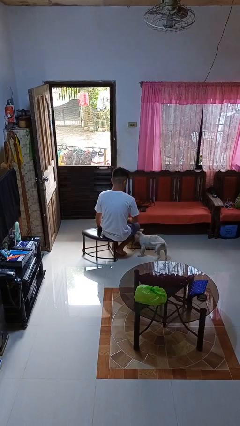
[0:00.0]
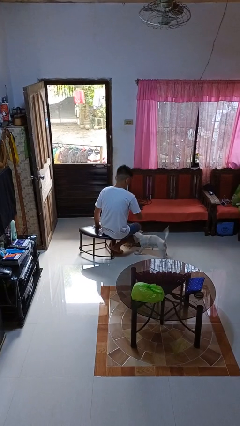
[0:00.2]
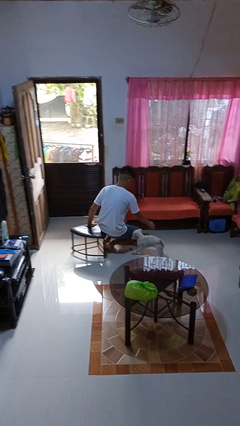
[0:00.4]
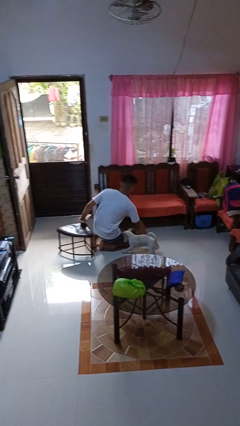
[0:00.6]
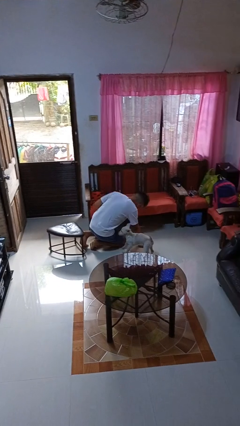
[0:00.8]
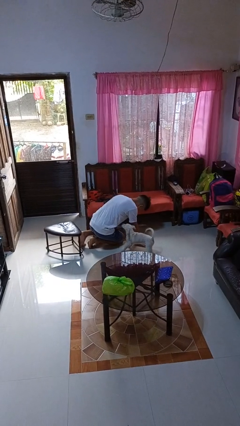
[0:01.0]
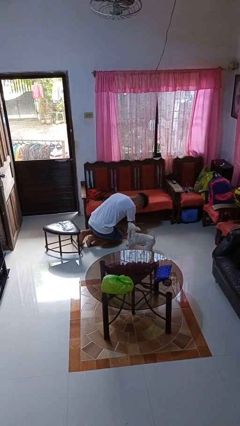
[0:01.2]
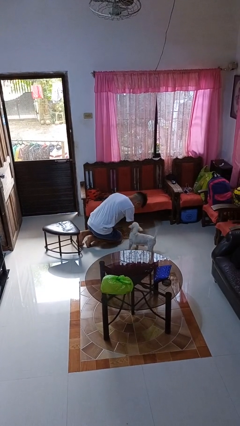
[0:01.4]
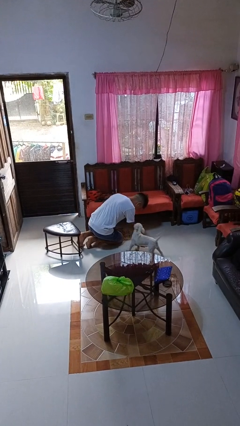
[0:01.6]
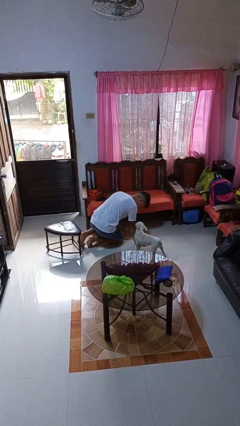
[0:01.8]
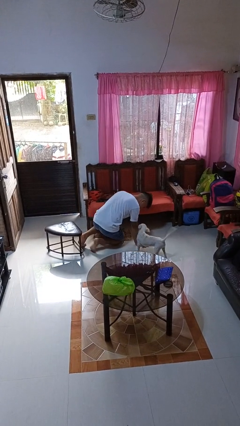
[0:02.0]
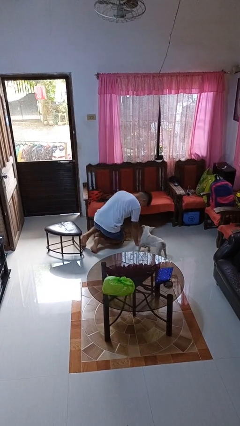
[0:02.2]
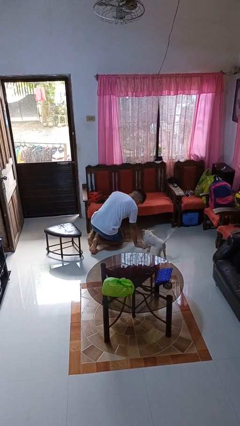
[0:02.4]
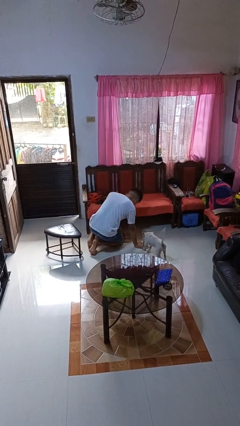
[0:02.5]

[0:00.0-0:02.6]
person falls from chair

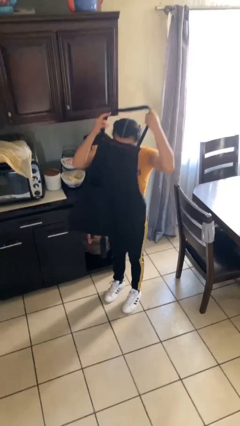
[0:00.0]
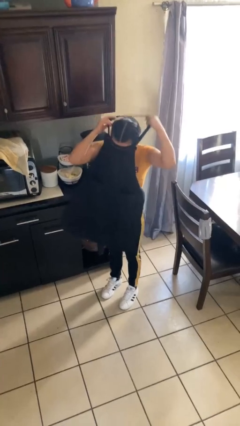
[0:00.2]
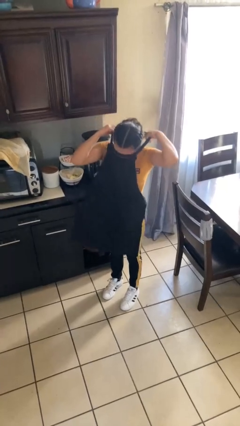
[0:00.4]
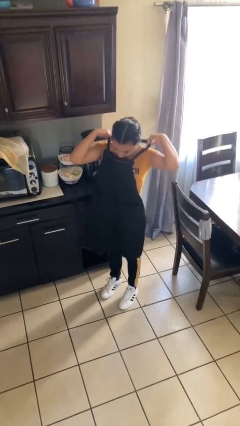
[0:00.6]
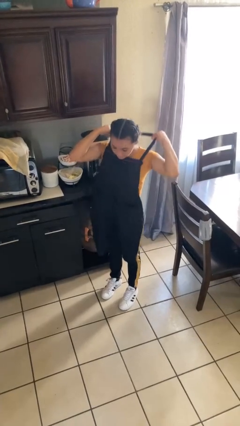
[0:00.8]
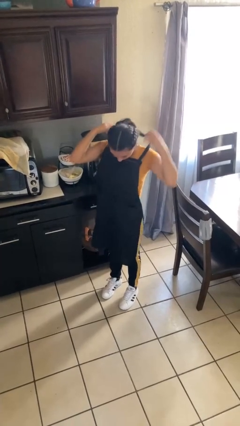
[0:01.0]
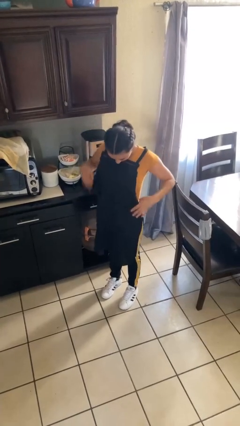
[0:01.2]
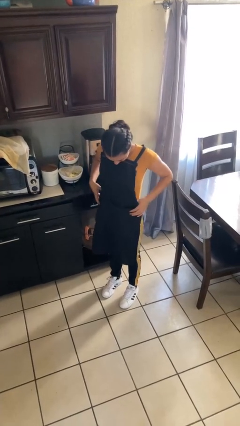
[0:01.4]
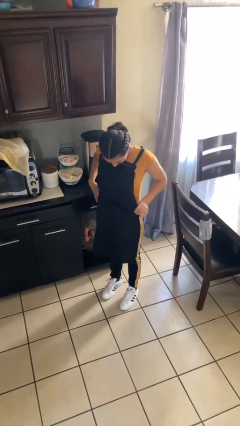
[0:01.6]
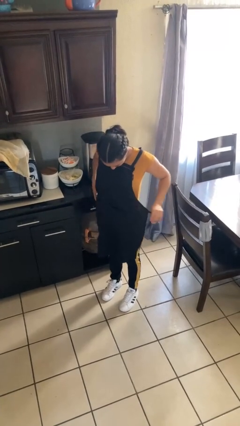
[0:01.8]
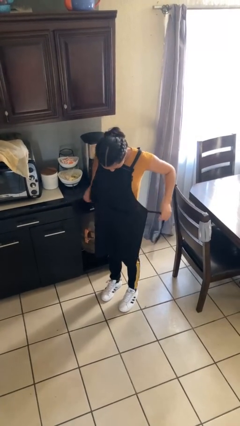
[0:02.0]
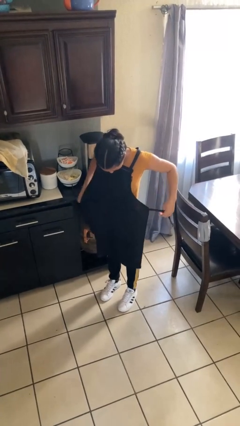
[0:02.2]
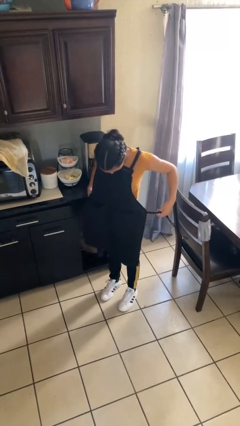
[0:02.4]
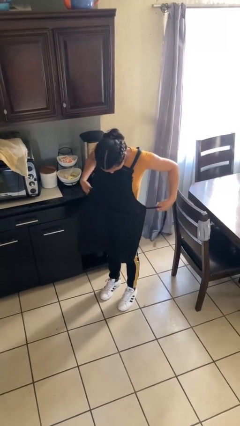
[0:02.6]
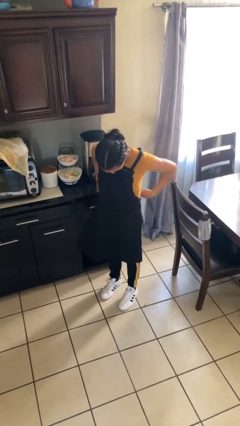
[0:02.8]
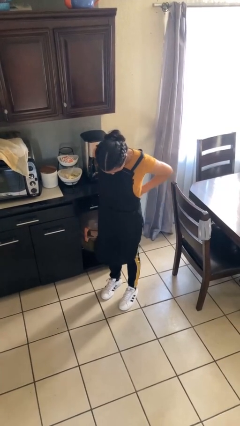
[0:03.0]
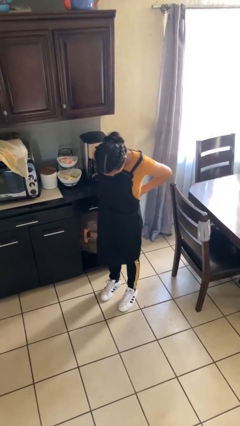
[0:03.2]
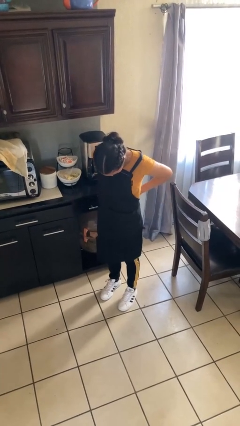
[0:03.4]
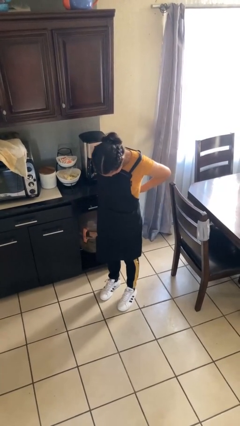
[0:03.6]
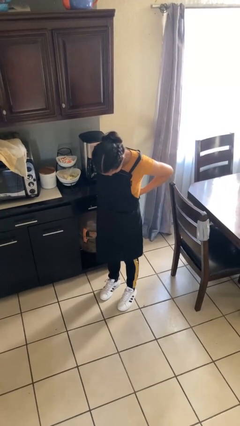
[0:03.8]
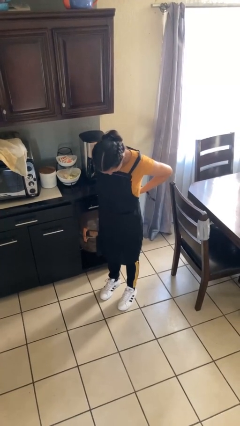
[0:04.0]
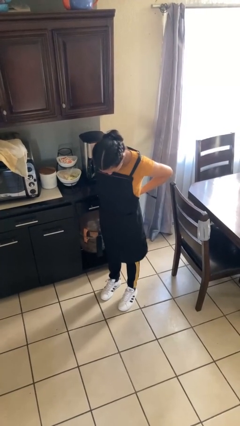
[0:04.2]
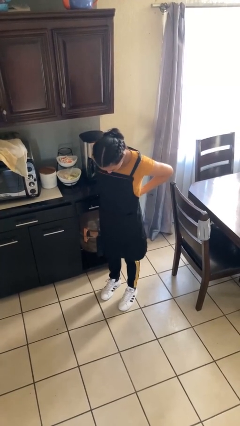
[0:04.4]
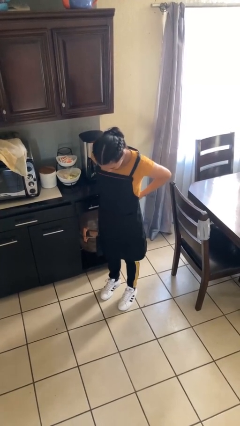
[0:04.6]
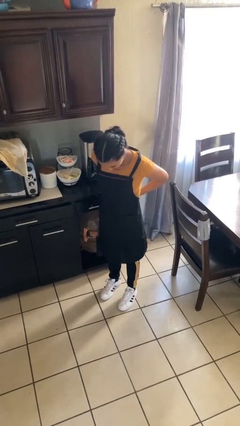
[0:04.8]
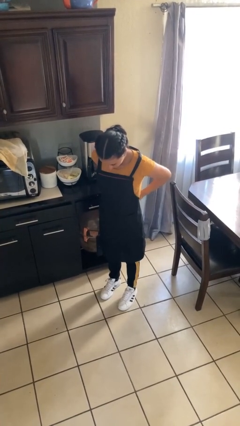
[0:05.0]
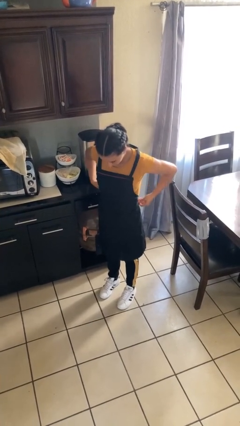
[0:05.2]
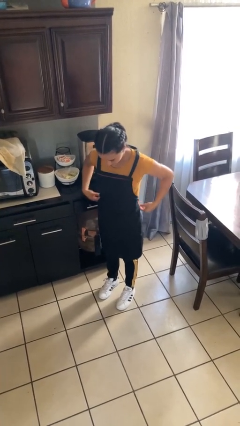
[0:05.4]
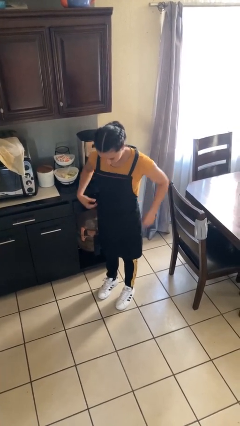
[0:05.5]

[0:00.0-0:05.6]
person puts on apron

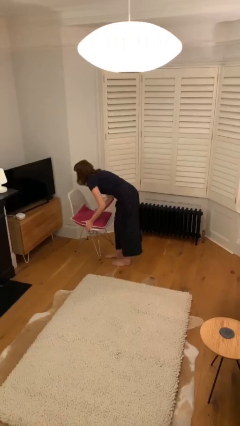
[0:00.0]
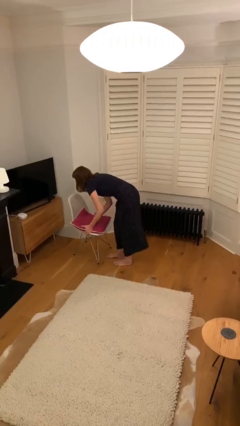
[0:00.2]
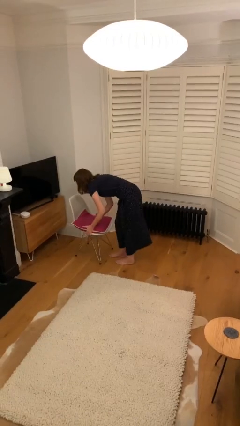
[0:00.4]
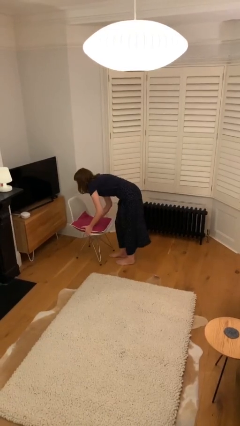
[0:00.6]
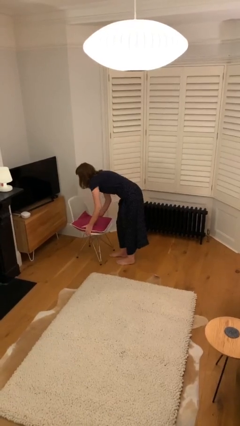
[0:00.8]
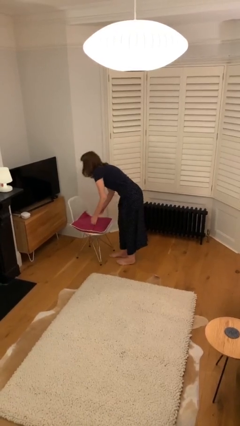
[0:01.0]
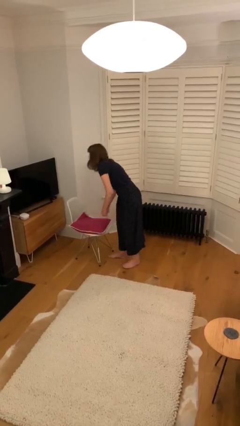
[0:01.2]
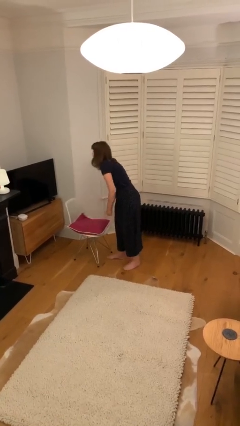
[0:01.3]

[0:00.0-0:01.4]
person puts down object on floor

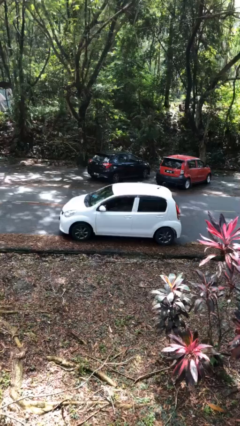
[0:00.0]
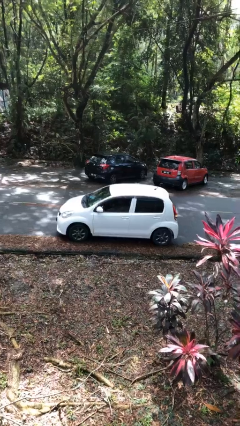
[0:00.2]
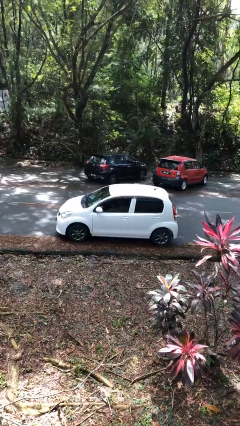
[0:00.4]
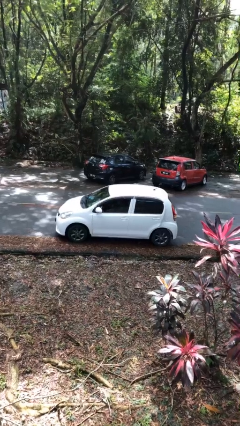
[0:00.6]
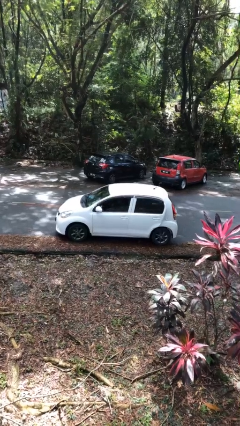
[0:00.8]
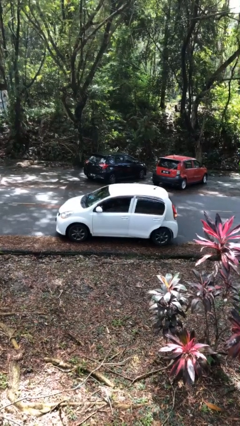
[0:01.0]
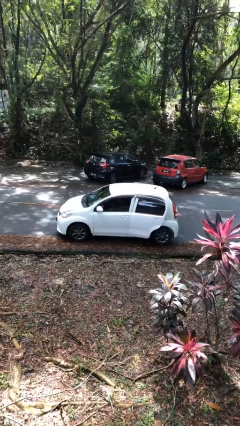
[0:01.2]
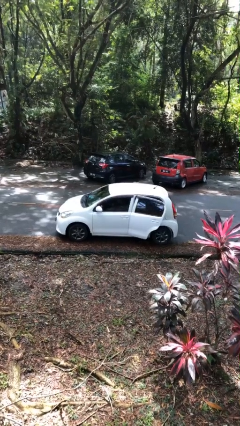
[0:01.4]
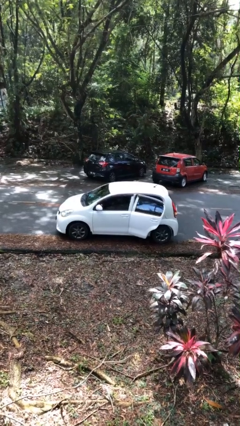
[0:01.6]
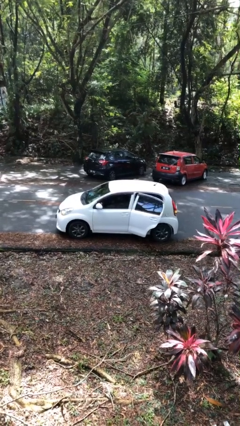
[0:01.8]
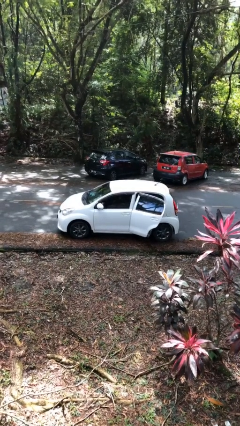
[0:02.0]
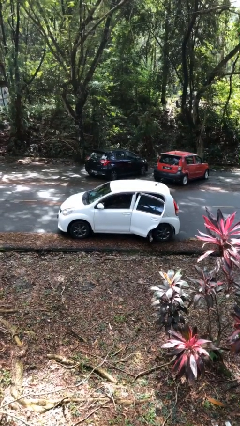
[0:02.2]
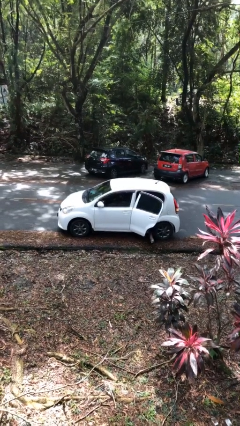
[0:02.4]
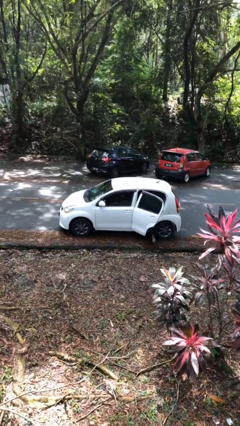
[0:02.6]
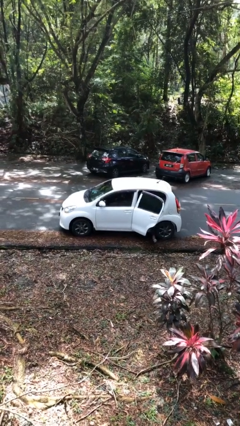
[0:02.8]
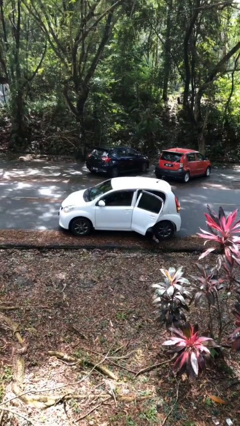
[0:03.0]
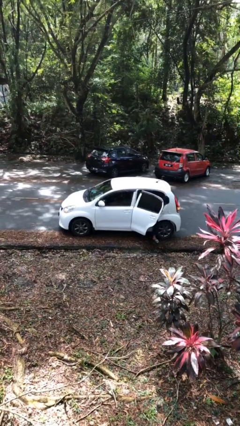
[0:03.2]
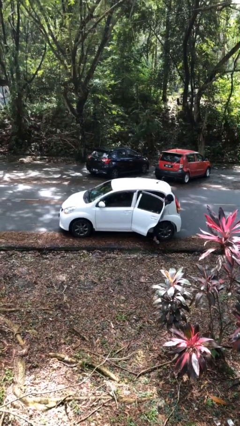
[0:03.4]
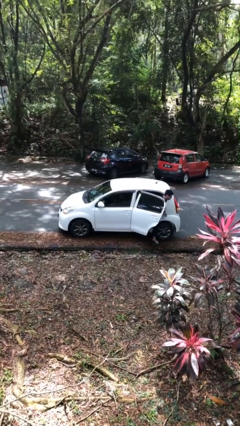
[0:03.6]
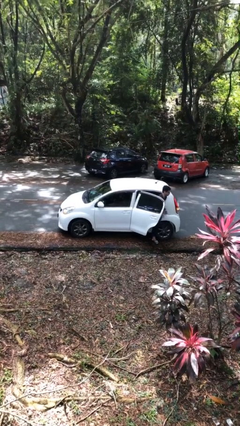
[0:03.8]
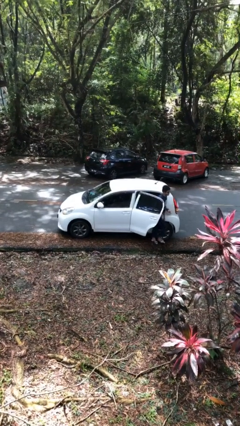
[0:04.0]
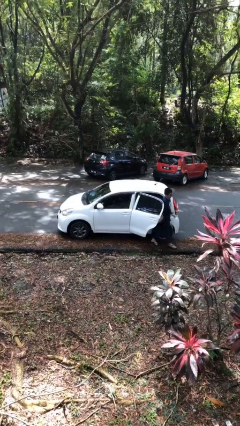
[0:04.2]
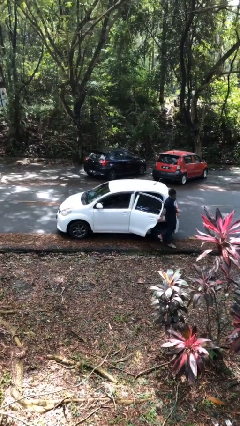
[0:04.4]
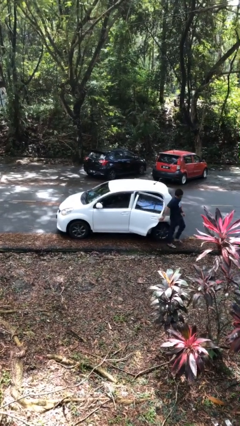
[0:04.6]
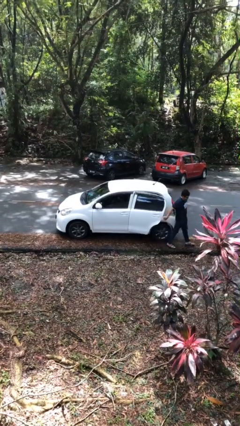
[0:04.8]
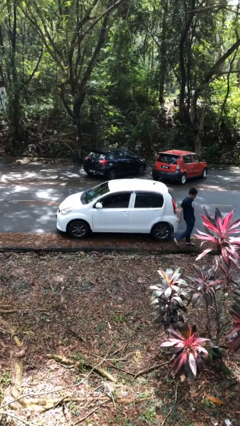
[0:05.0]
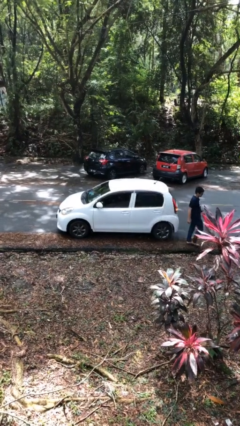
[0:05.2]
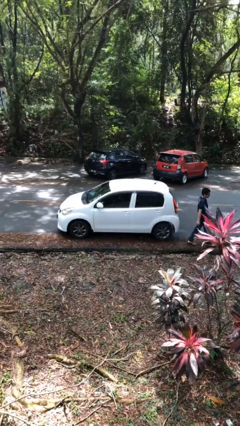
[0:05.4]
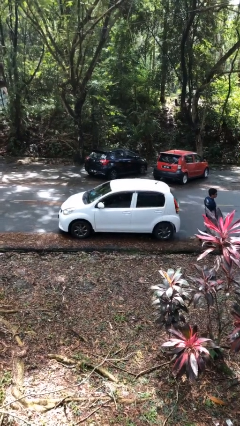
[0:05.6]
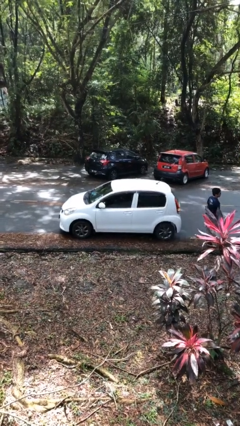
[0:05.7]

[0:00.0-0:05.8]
car drops off person

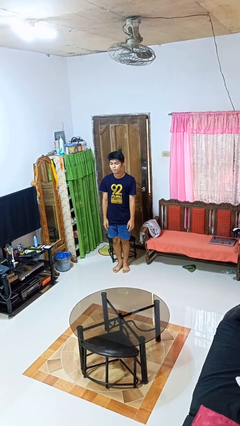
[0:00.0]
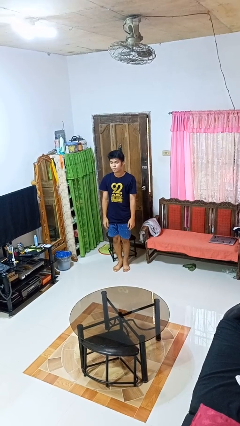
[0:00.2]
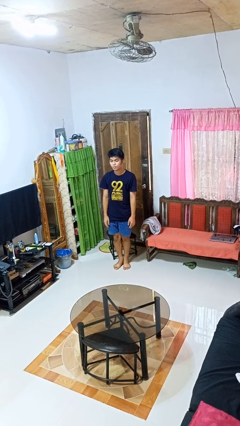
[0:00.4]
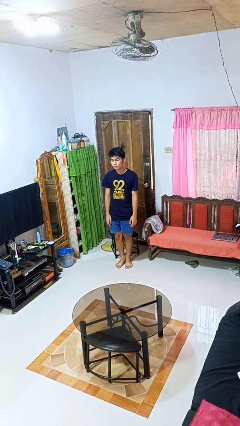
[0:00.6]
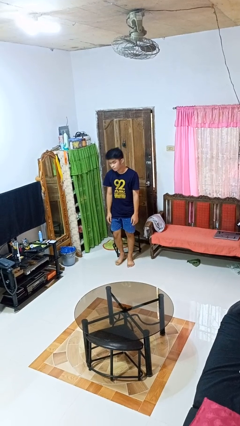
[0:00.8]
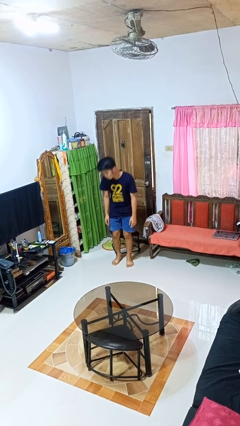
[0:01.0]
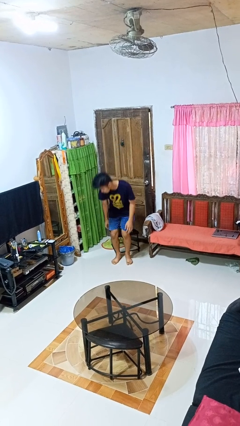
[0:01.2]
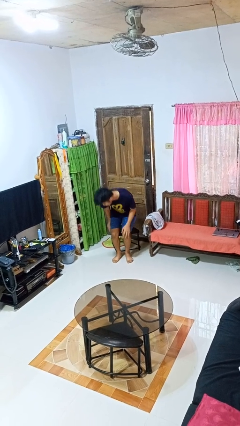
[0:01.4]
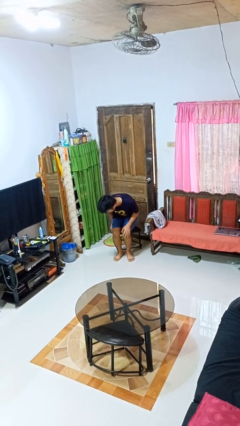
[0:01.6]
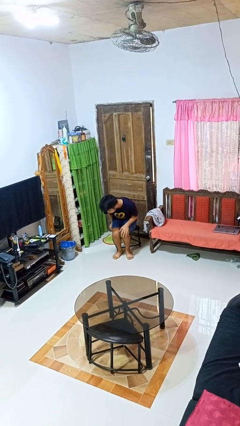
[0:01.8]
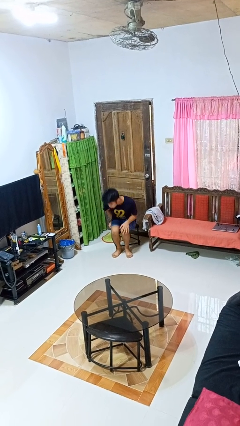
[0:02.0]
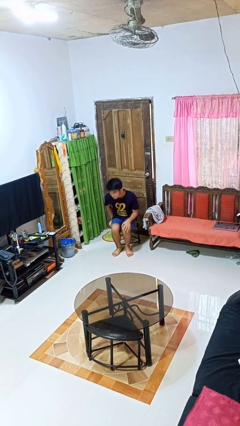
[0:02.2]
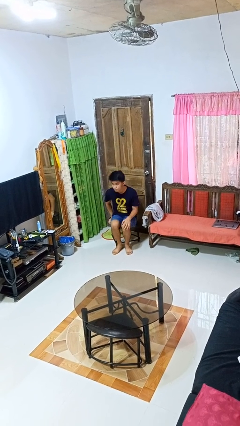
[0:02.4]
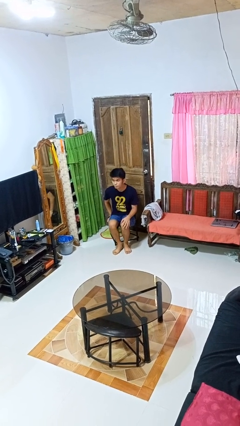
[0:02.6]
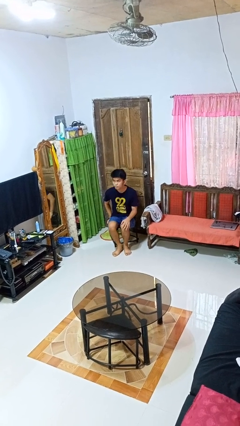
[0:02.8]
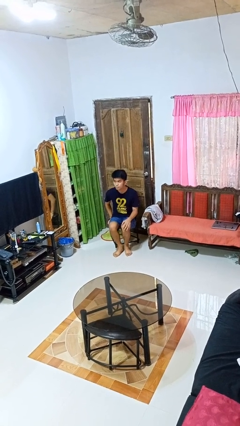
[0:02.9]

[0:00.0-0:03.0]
person sits down
